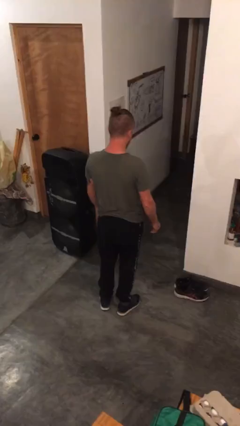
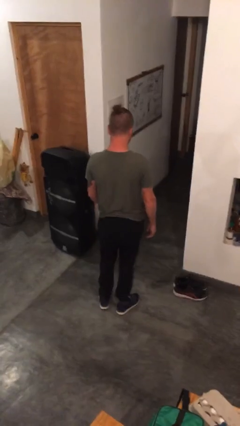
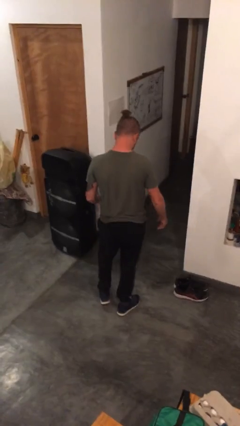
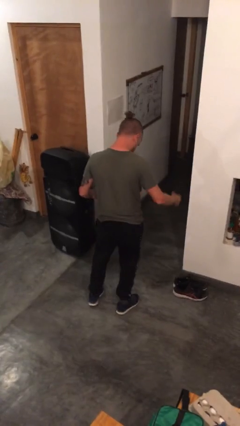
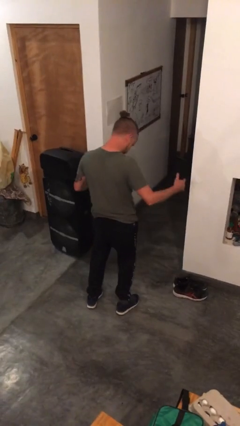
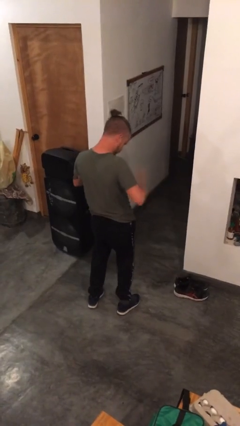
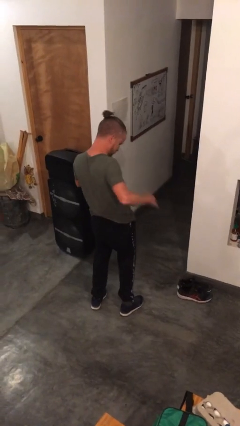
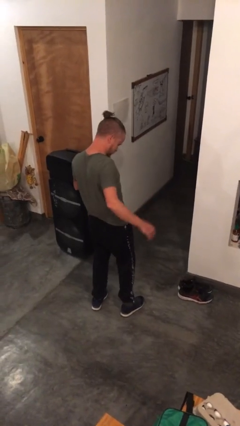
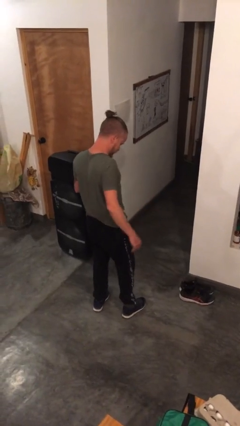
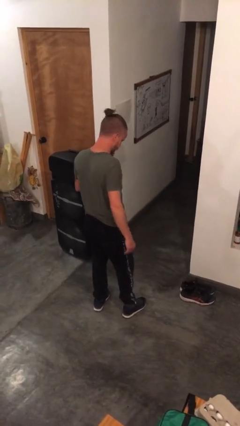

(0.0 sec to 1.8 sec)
person swats bug

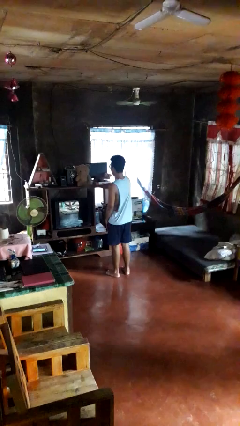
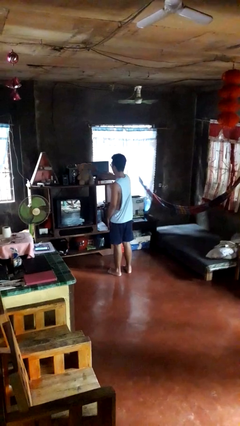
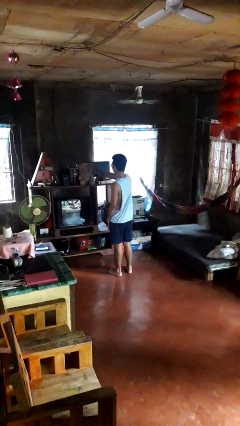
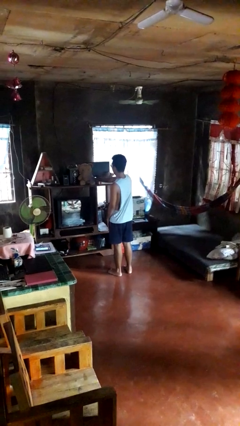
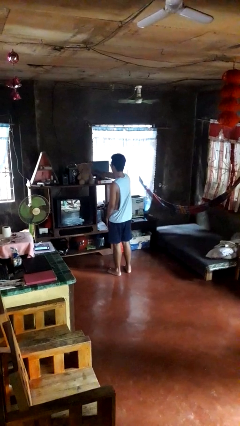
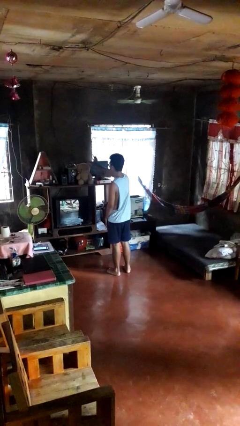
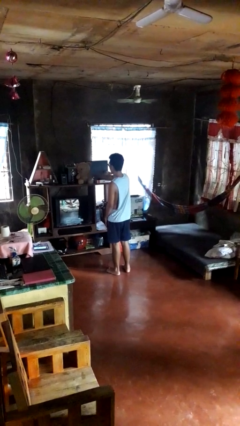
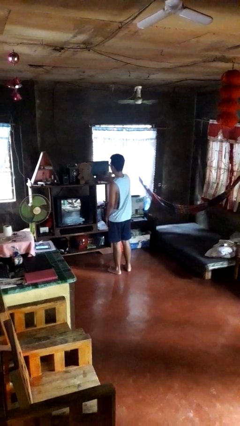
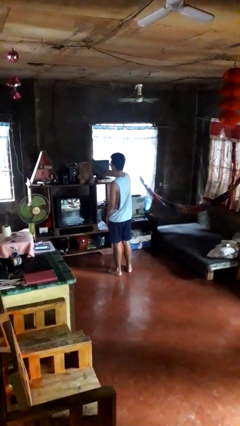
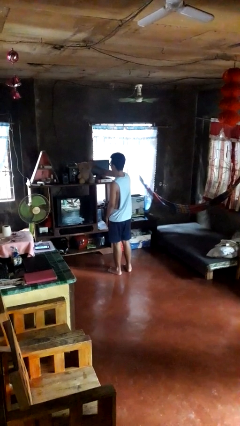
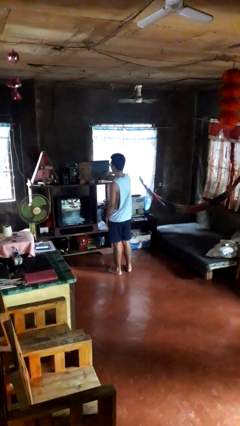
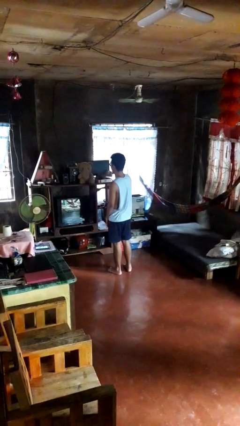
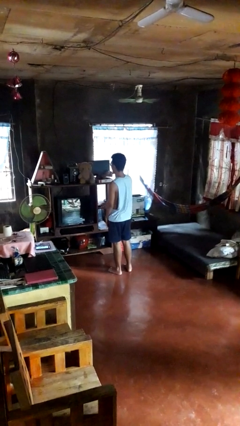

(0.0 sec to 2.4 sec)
person waves hand over object

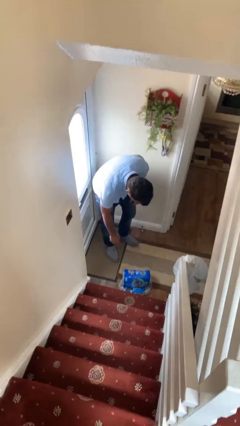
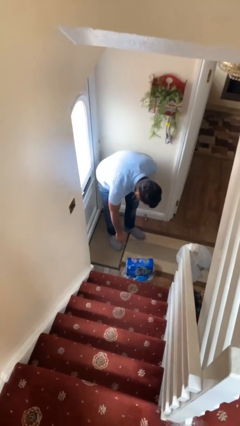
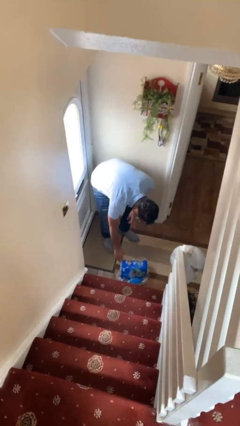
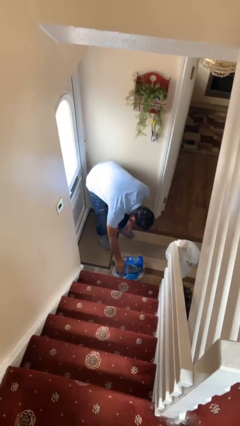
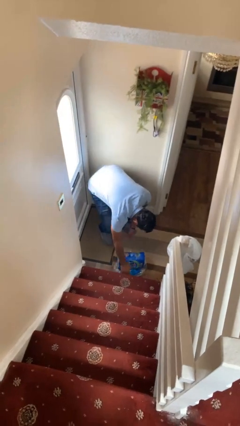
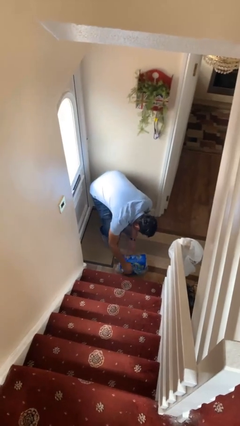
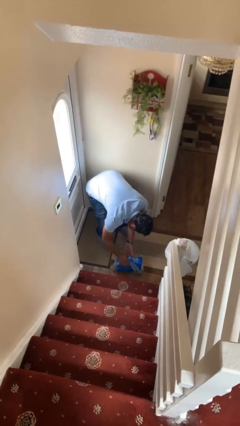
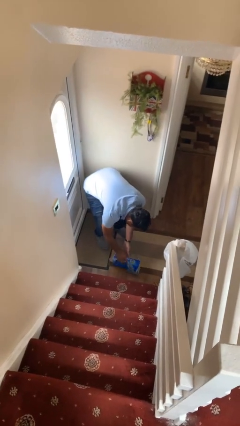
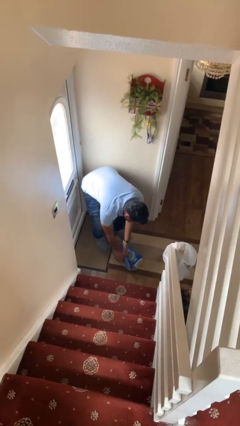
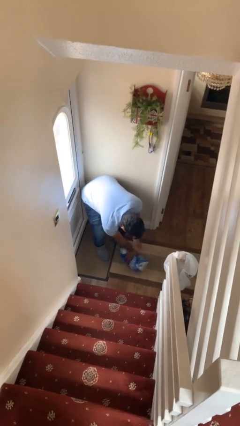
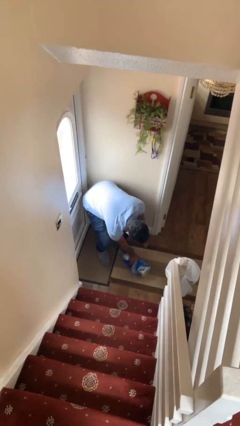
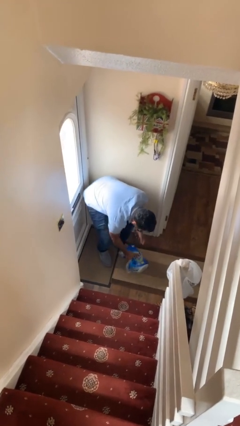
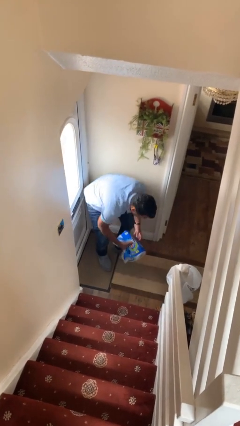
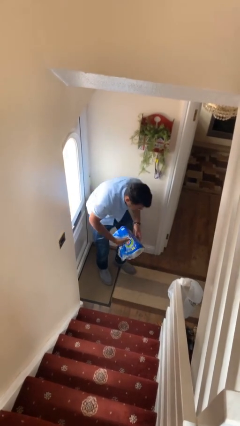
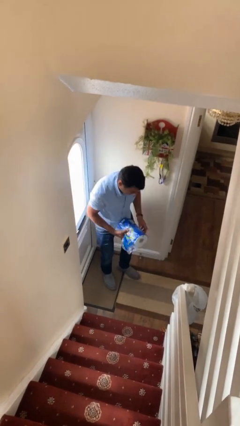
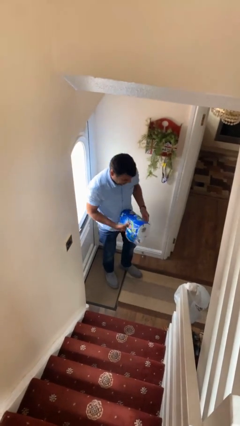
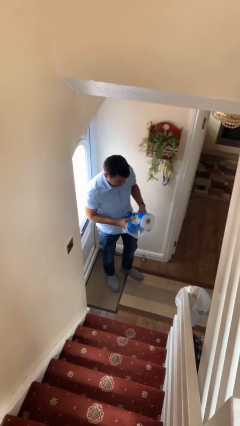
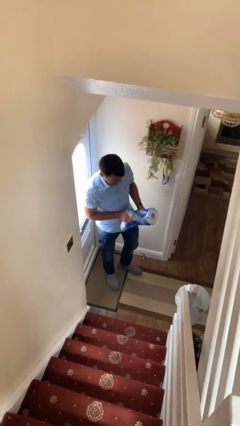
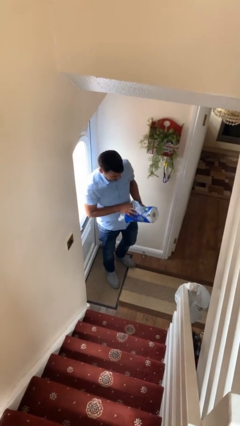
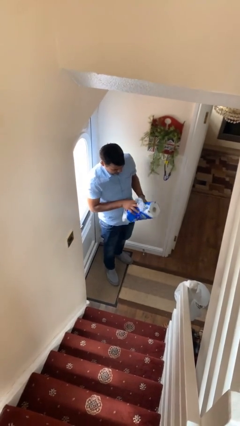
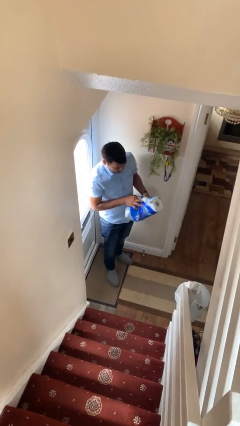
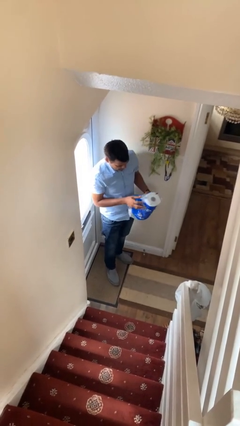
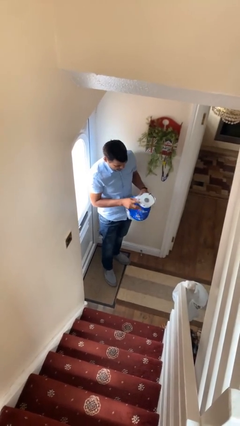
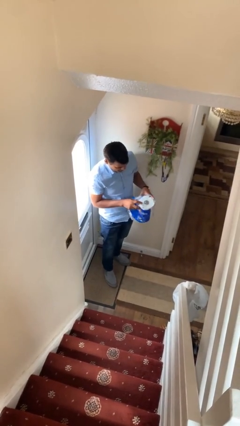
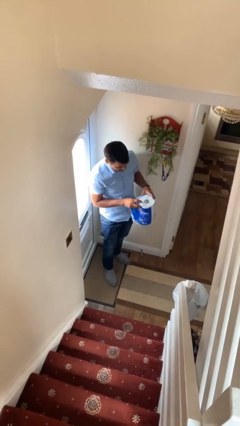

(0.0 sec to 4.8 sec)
person picks up object from floor

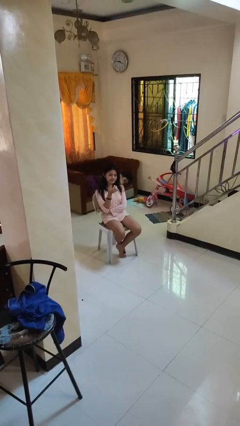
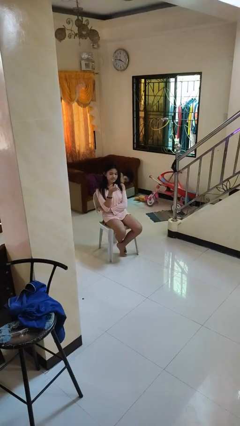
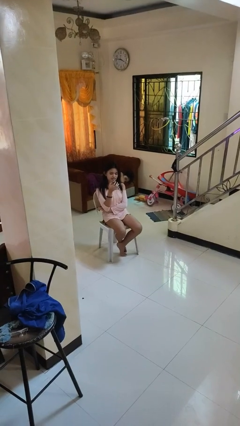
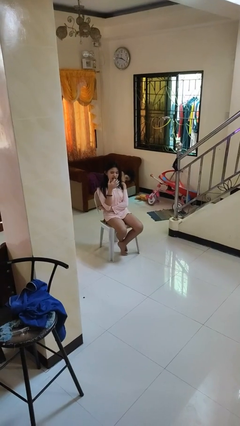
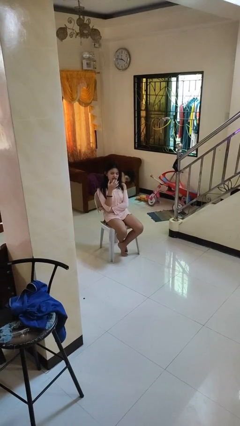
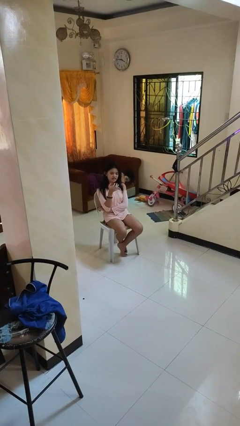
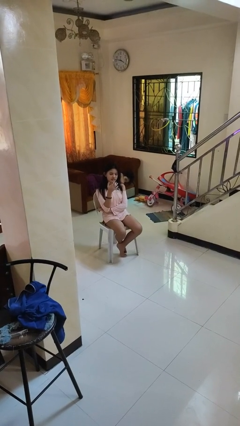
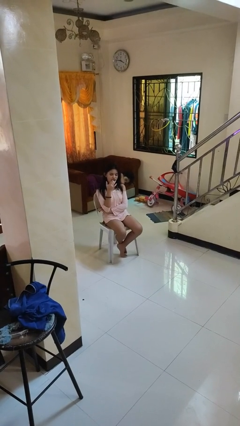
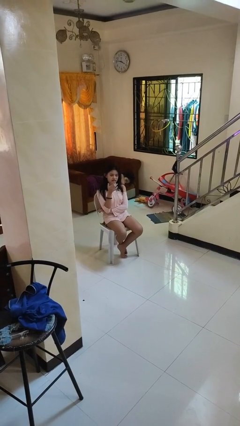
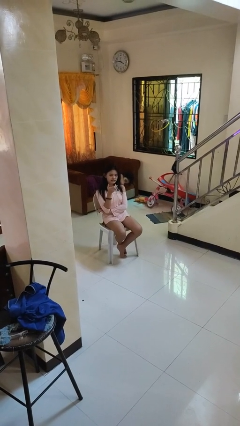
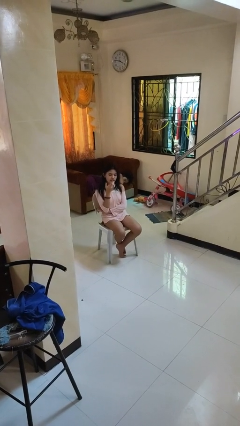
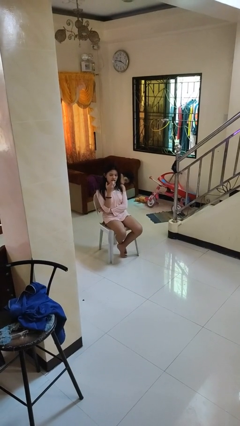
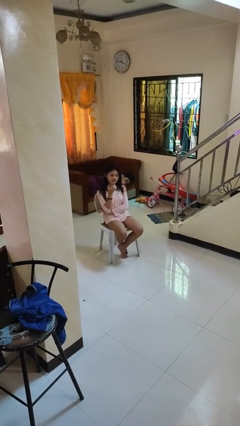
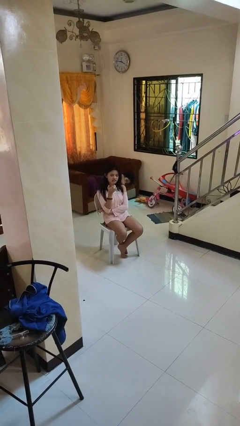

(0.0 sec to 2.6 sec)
person licks fingers

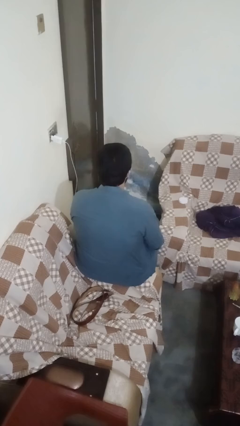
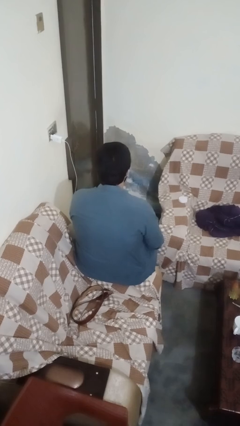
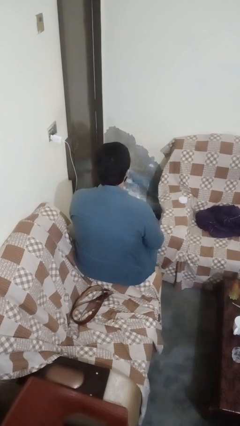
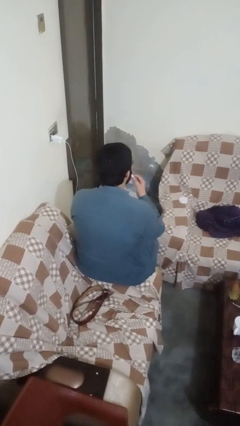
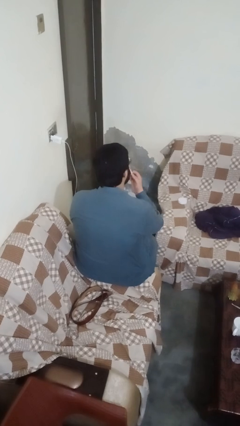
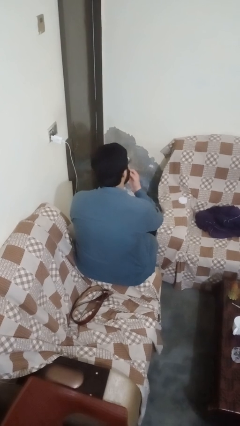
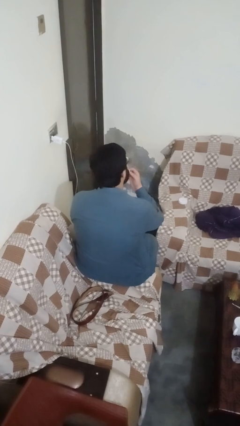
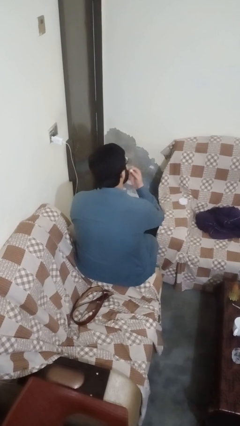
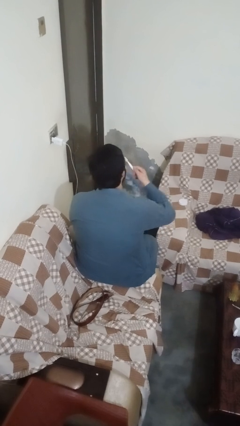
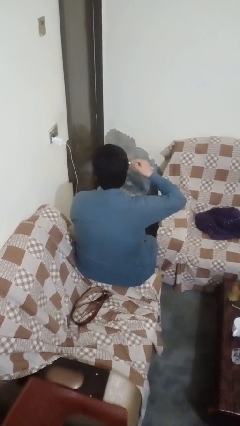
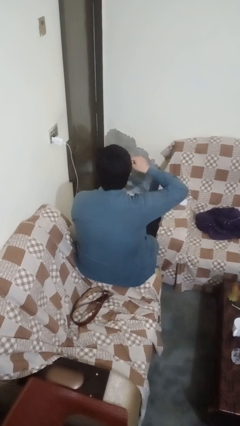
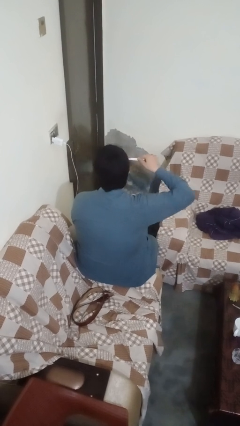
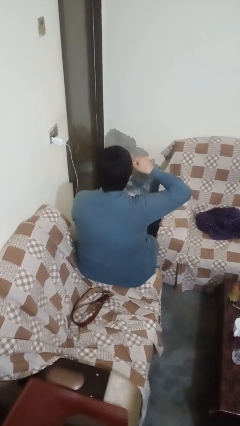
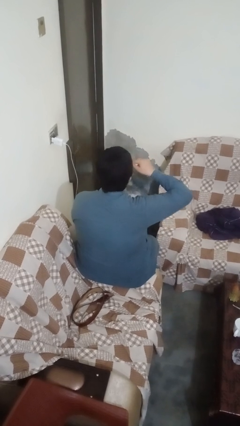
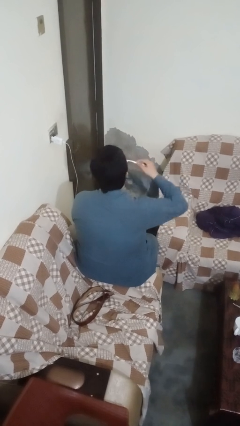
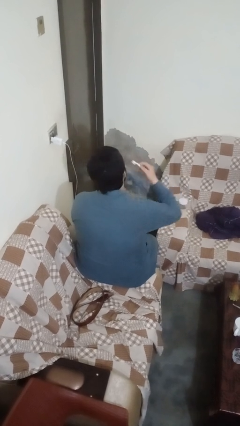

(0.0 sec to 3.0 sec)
person brushes teeth

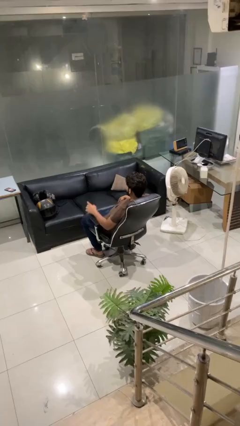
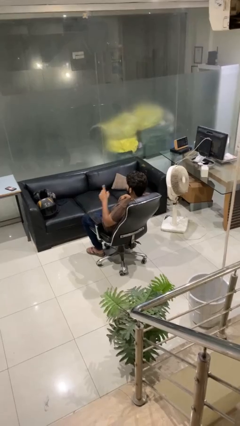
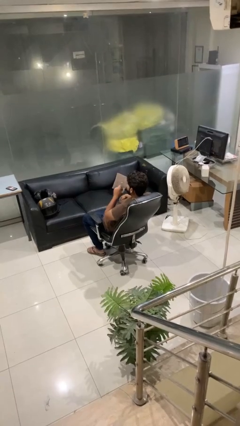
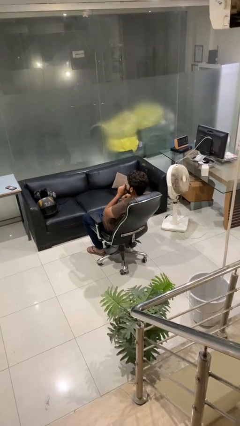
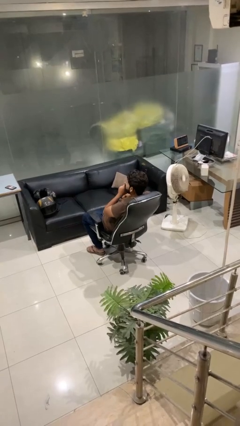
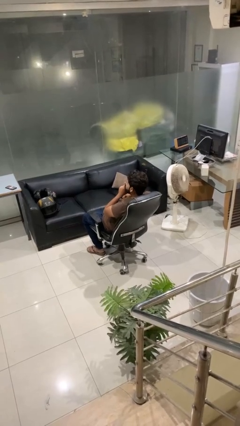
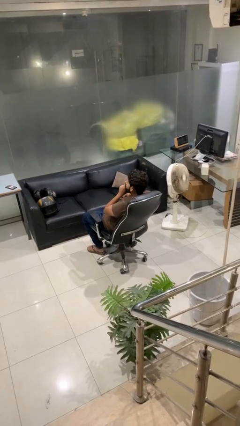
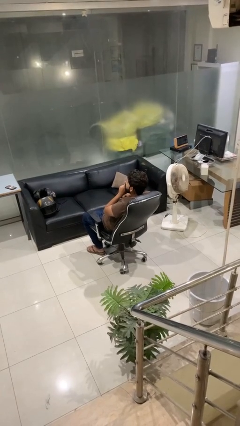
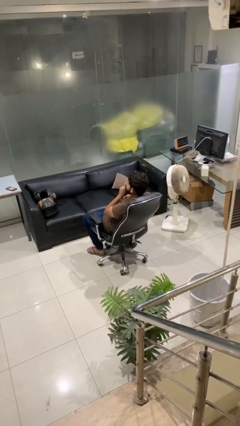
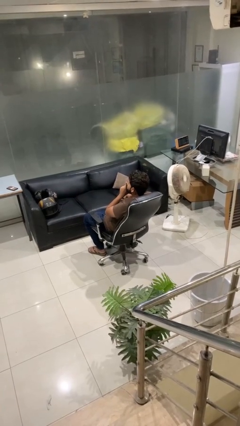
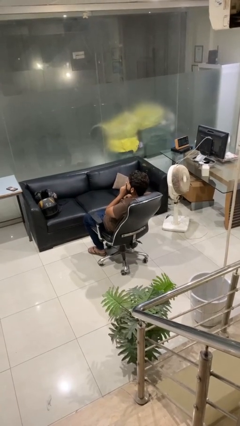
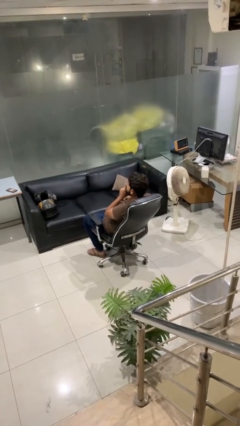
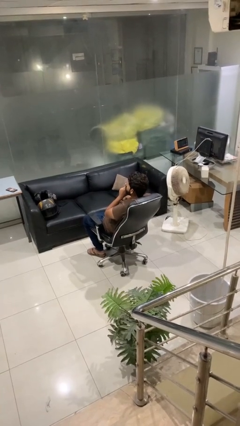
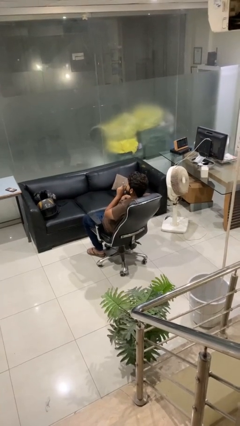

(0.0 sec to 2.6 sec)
person gestures be quiet
